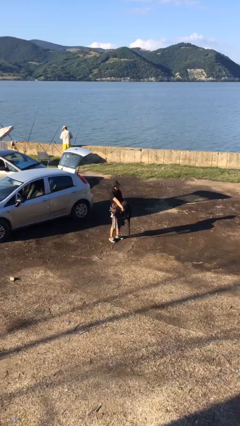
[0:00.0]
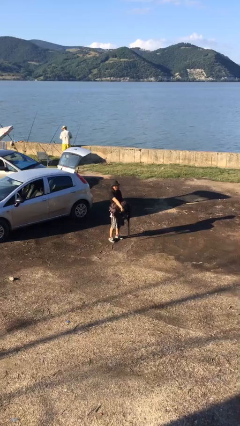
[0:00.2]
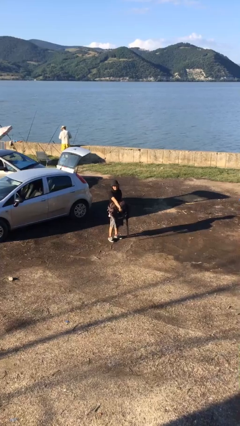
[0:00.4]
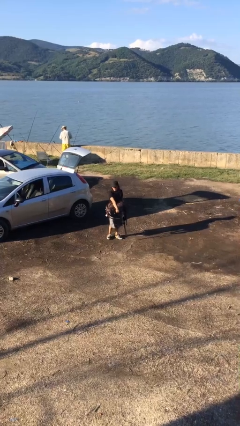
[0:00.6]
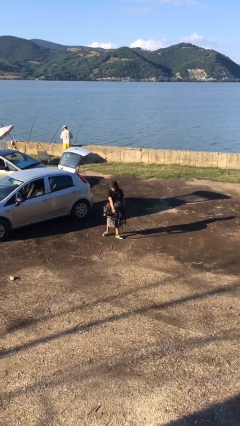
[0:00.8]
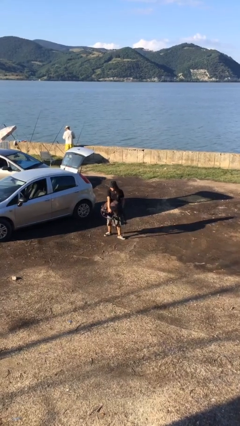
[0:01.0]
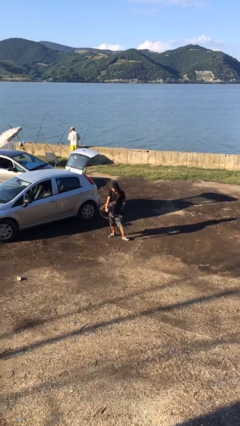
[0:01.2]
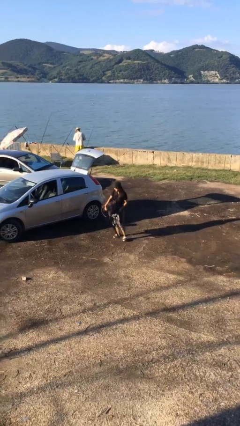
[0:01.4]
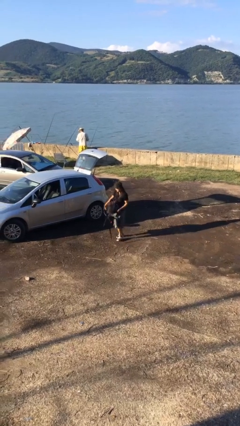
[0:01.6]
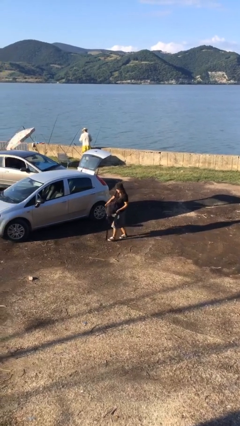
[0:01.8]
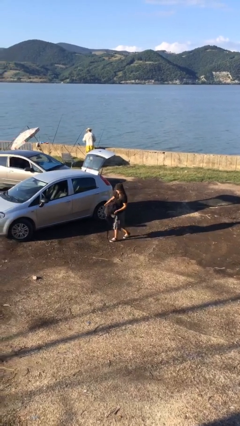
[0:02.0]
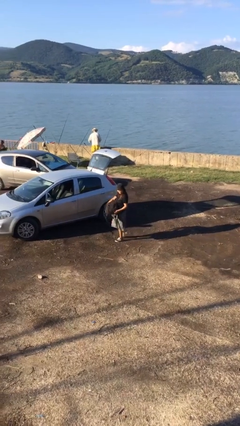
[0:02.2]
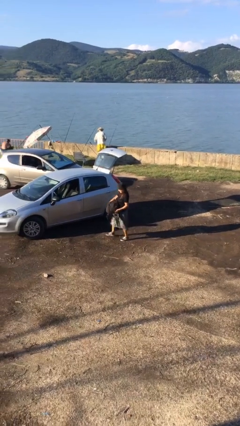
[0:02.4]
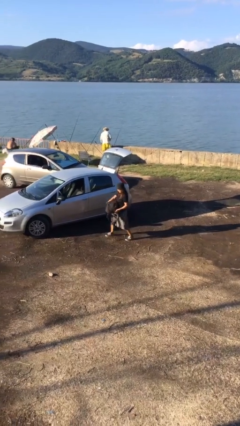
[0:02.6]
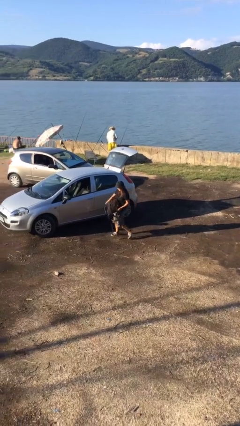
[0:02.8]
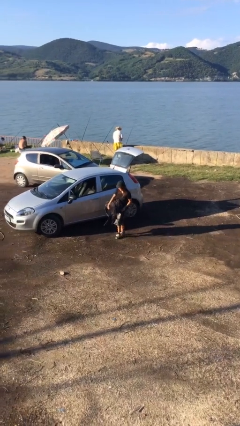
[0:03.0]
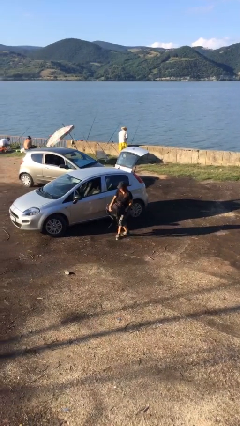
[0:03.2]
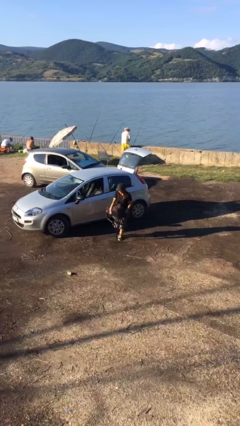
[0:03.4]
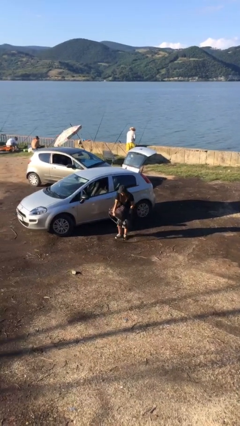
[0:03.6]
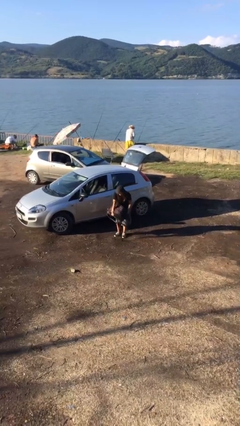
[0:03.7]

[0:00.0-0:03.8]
person carries heavy object

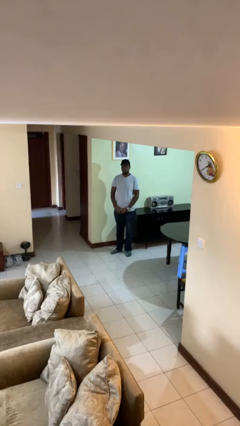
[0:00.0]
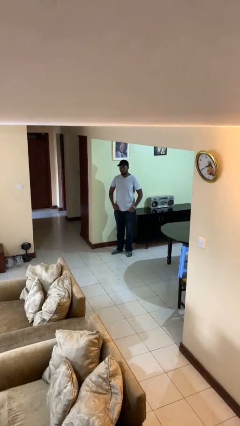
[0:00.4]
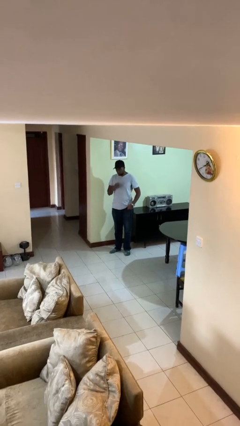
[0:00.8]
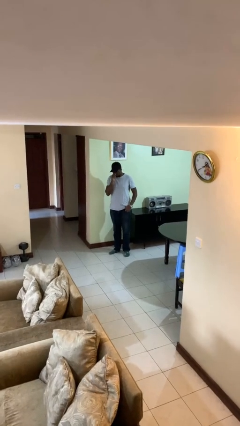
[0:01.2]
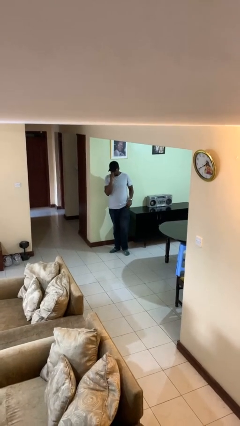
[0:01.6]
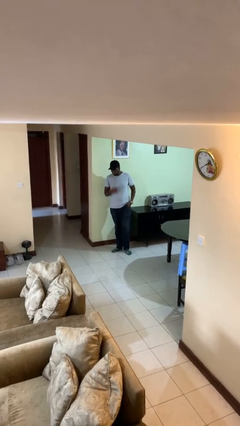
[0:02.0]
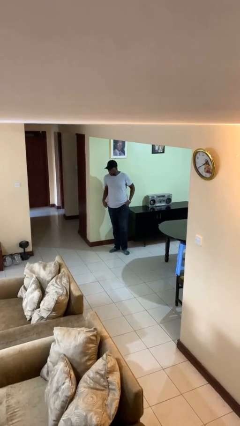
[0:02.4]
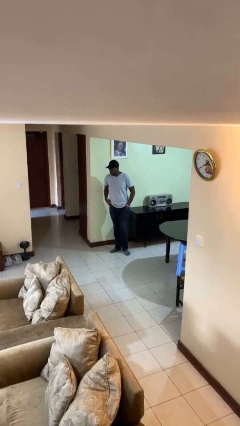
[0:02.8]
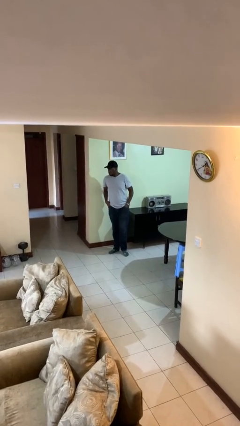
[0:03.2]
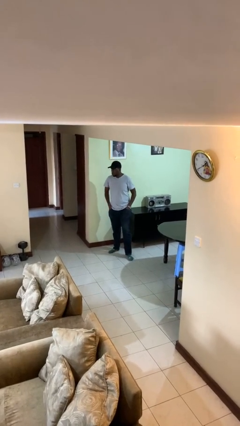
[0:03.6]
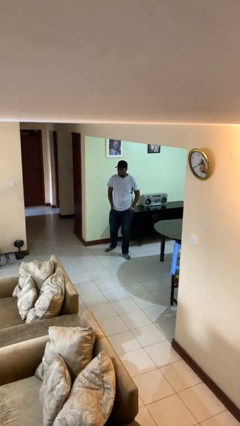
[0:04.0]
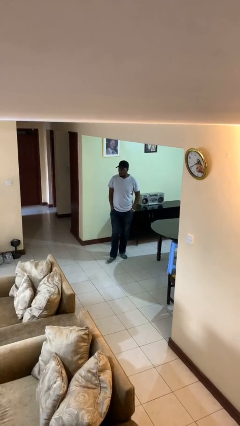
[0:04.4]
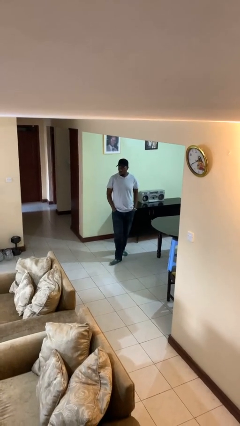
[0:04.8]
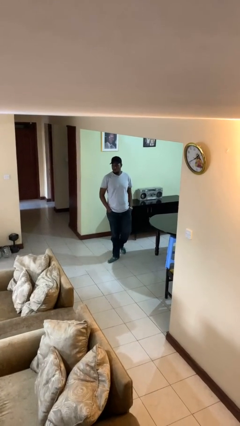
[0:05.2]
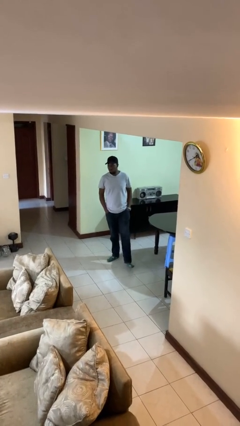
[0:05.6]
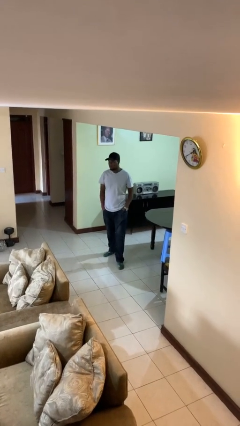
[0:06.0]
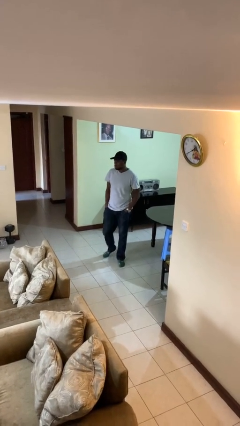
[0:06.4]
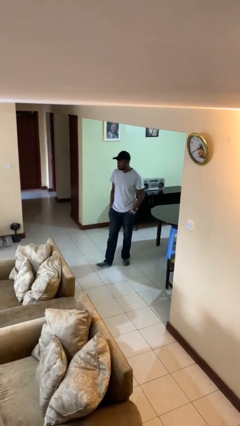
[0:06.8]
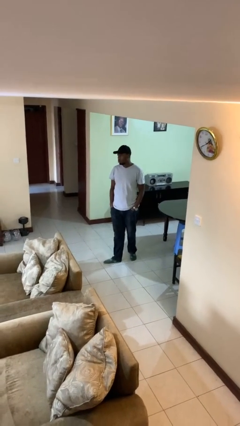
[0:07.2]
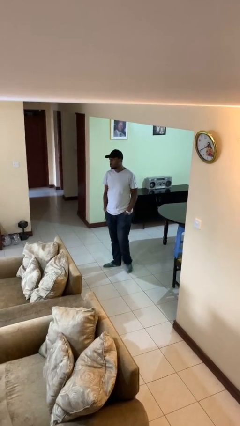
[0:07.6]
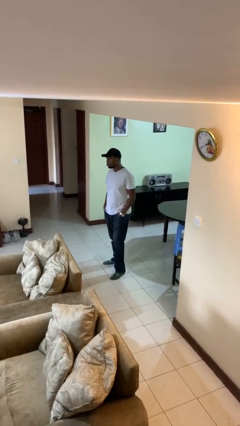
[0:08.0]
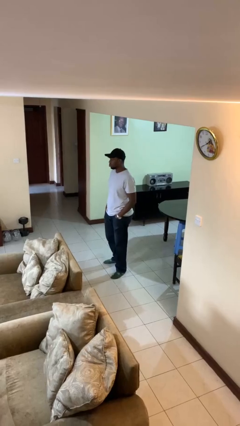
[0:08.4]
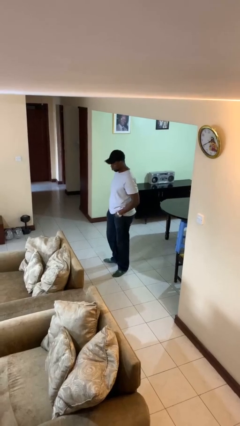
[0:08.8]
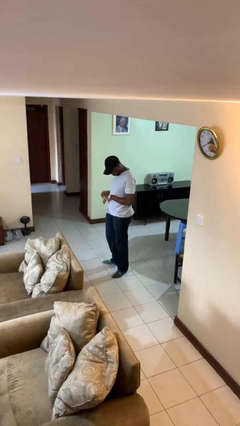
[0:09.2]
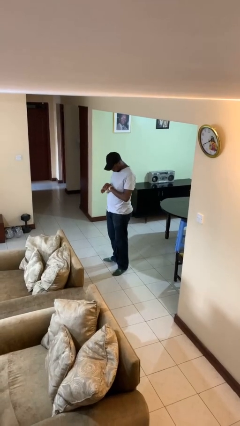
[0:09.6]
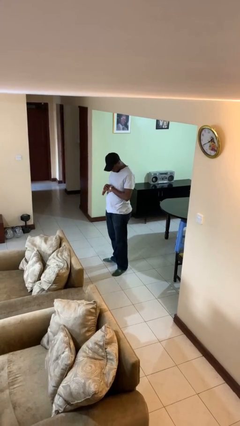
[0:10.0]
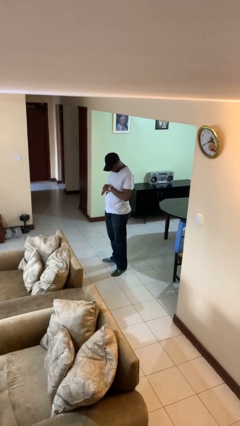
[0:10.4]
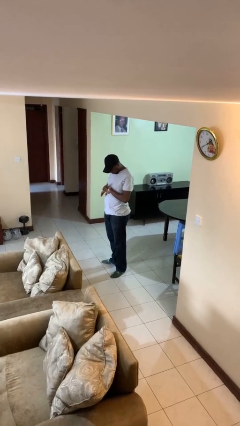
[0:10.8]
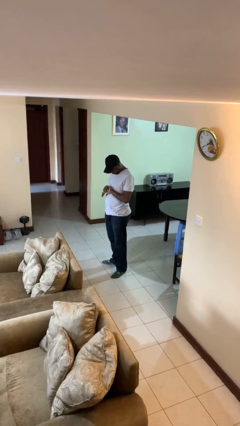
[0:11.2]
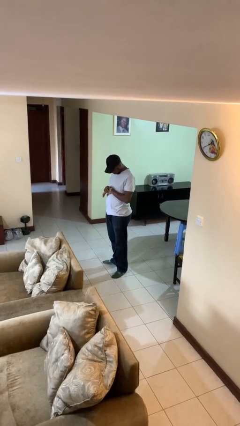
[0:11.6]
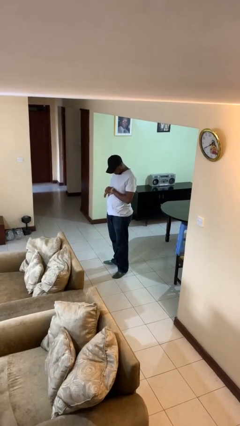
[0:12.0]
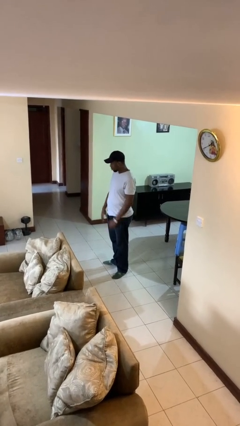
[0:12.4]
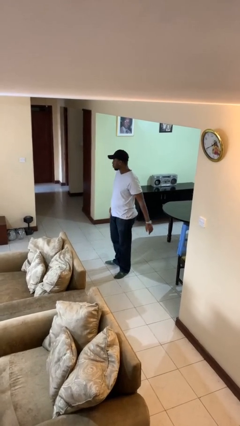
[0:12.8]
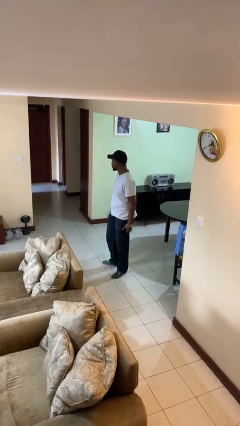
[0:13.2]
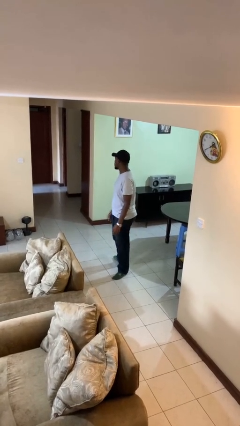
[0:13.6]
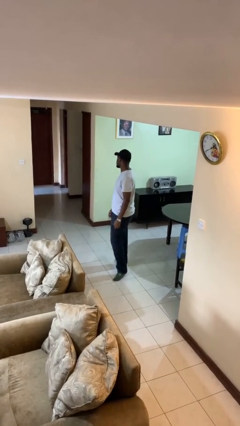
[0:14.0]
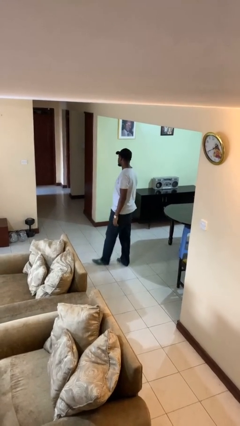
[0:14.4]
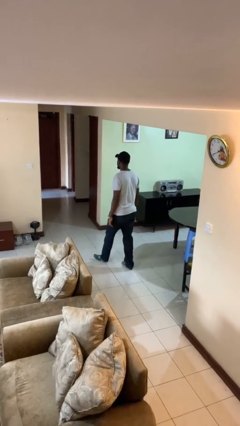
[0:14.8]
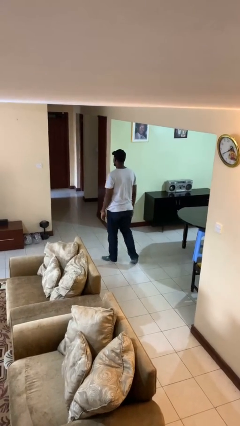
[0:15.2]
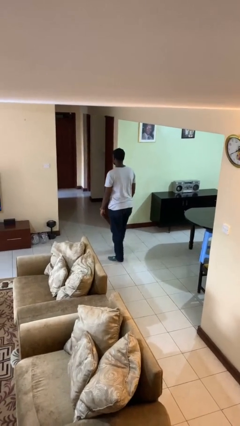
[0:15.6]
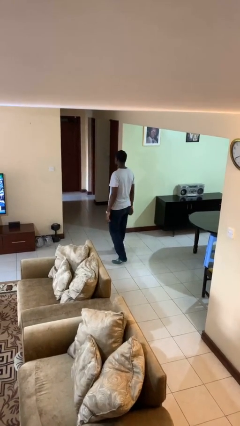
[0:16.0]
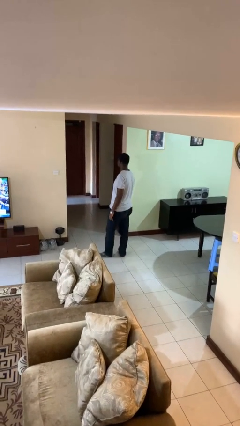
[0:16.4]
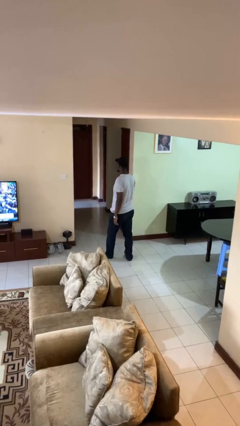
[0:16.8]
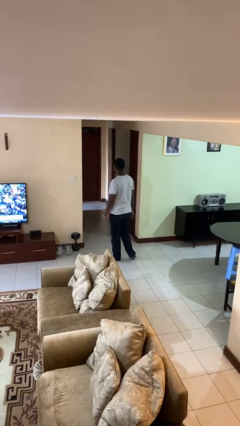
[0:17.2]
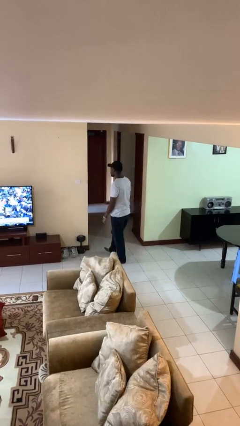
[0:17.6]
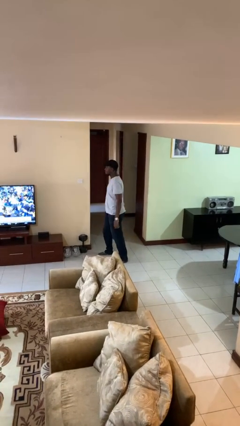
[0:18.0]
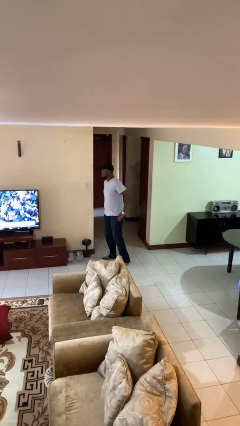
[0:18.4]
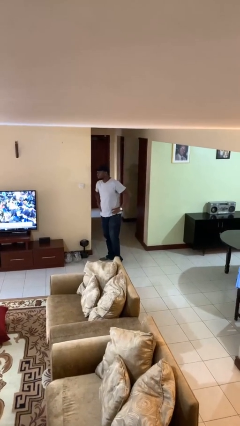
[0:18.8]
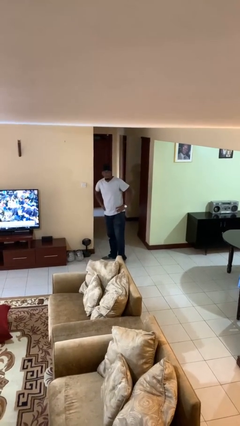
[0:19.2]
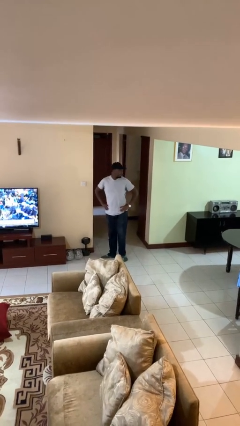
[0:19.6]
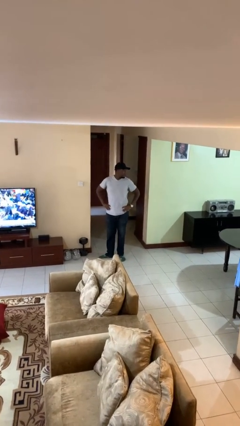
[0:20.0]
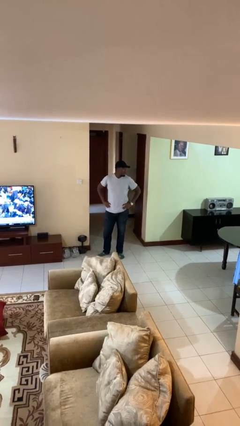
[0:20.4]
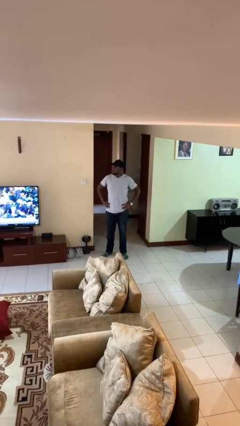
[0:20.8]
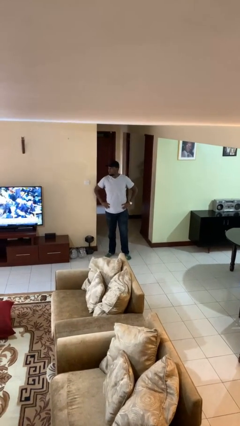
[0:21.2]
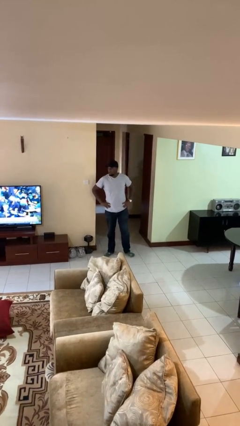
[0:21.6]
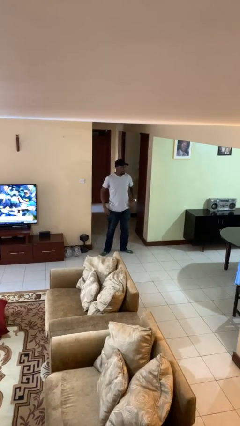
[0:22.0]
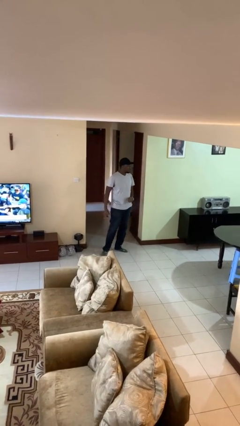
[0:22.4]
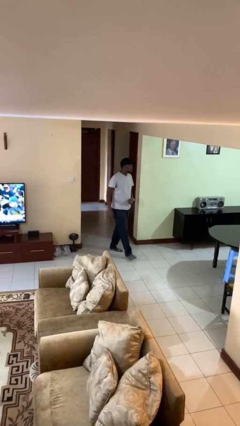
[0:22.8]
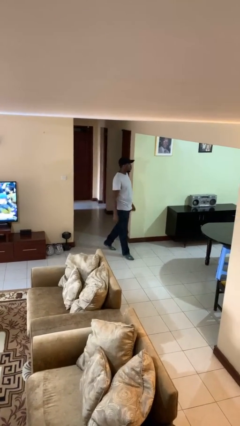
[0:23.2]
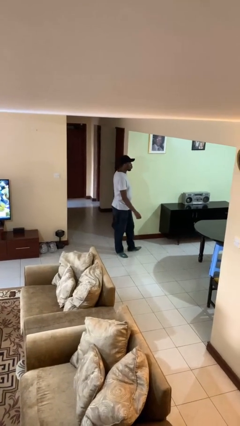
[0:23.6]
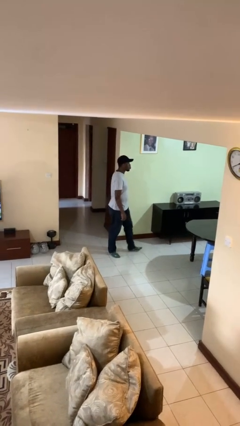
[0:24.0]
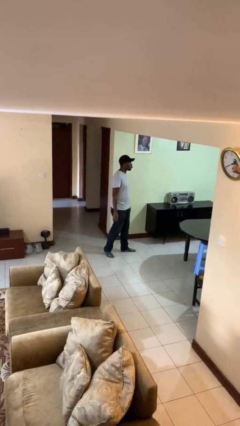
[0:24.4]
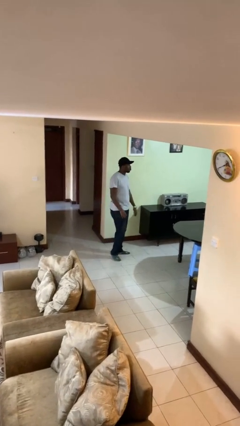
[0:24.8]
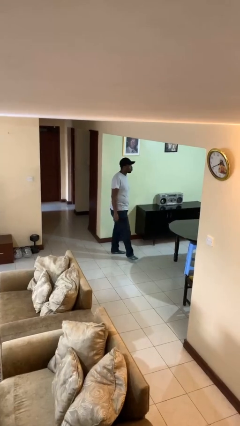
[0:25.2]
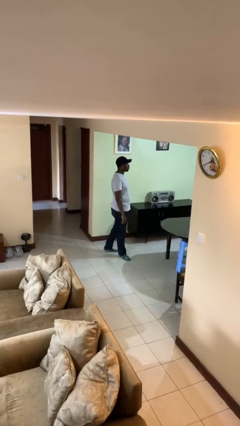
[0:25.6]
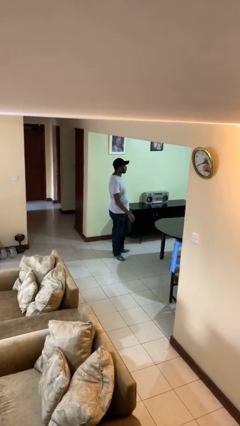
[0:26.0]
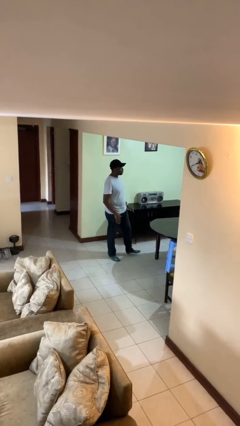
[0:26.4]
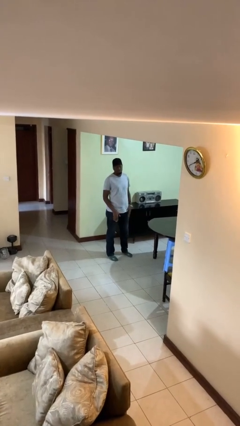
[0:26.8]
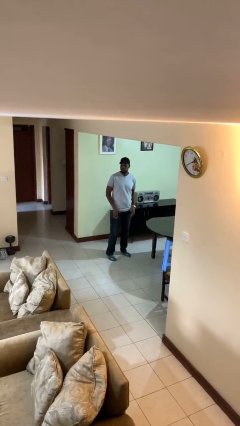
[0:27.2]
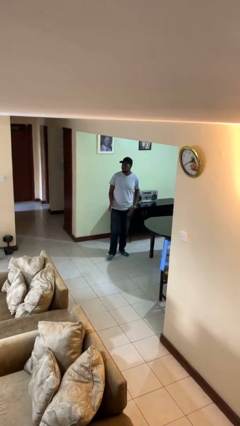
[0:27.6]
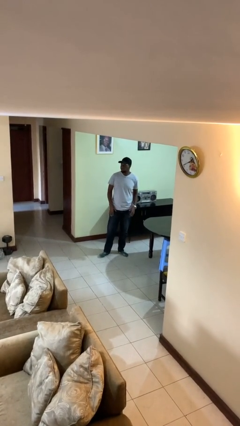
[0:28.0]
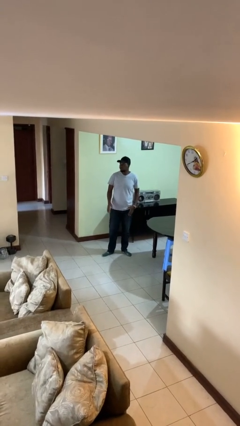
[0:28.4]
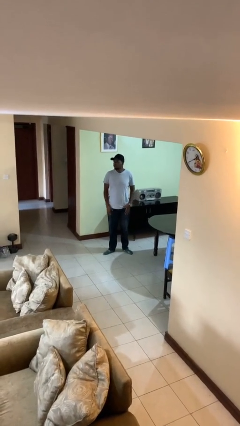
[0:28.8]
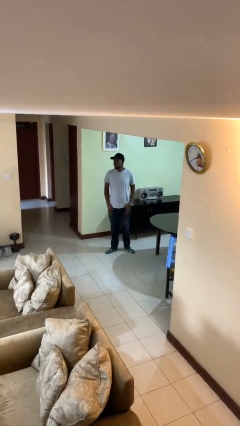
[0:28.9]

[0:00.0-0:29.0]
person walks
